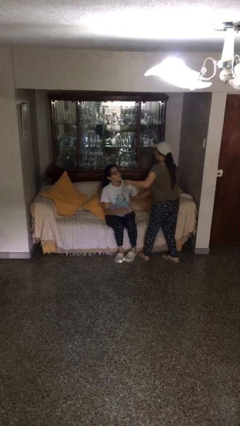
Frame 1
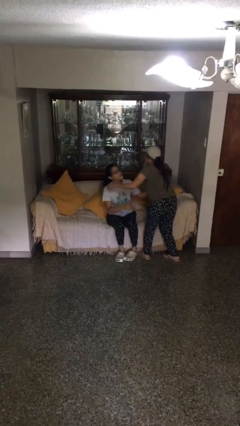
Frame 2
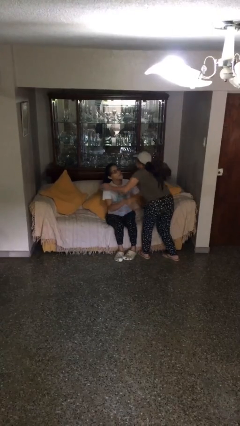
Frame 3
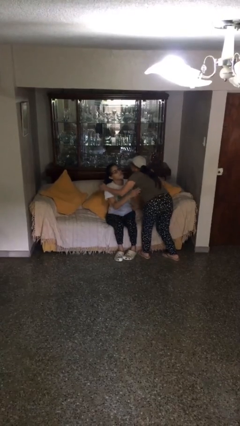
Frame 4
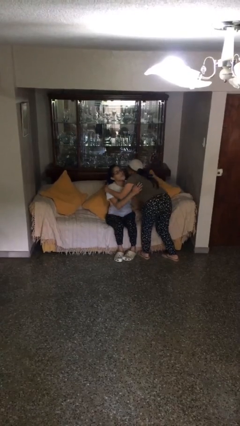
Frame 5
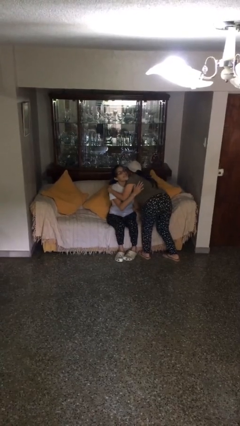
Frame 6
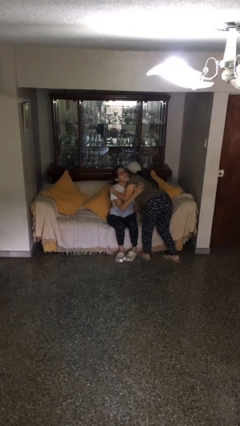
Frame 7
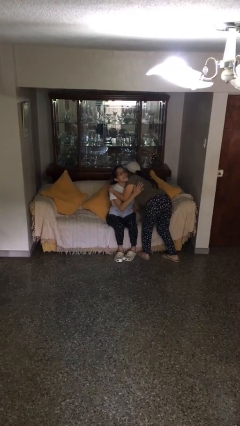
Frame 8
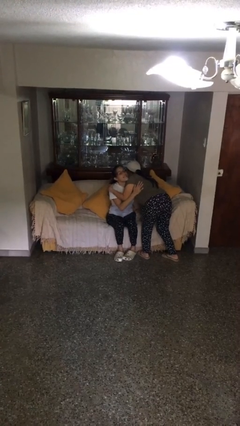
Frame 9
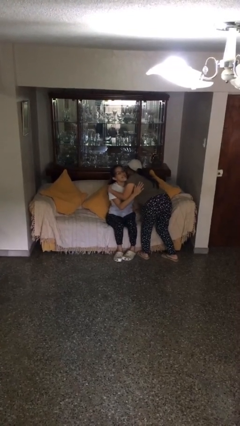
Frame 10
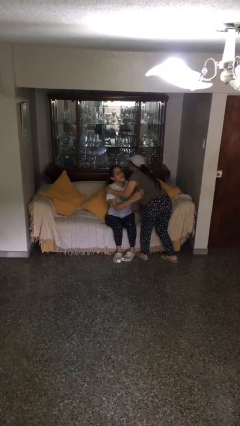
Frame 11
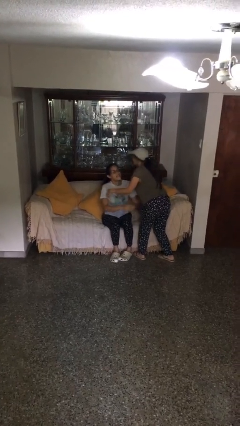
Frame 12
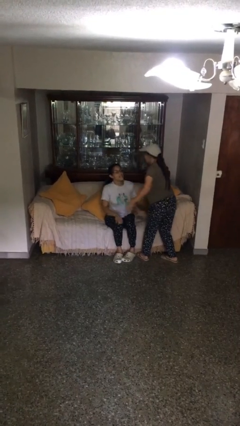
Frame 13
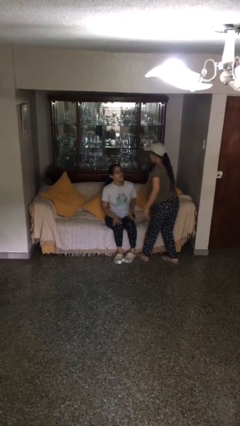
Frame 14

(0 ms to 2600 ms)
person embraces person

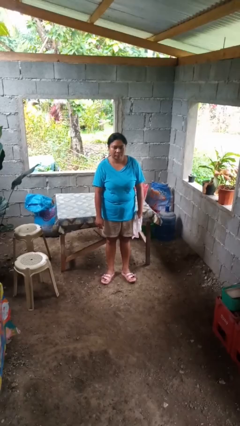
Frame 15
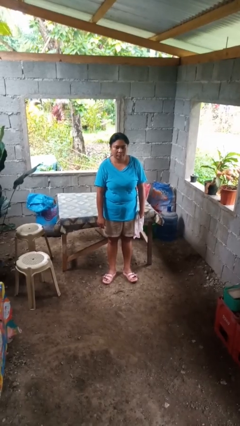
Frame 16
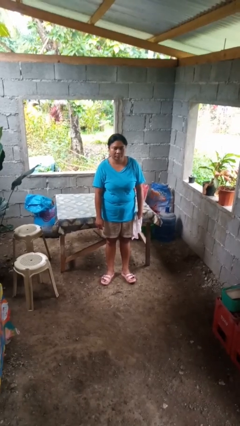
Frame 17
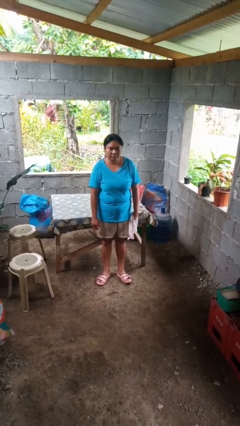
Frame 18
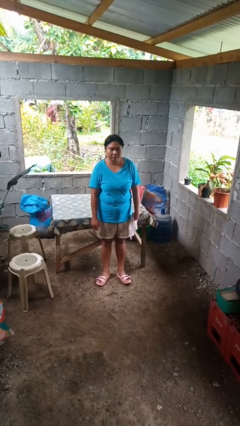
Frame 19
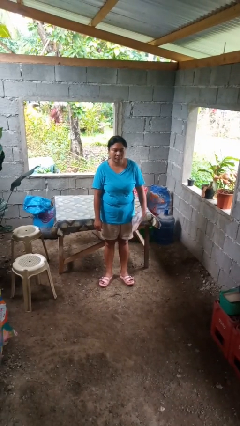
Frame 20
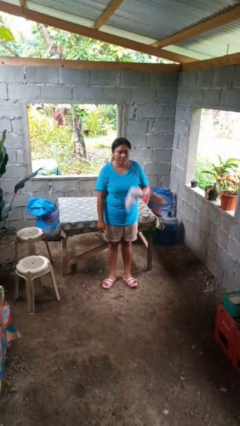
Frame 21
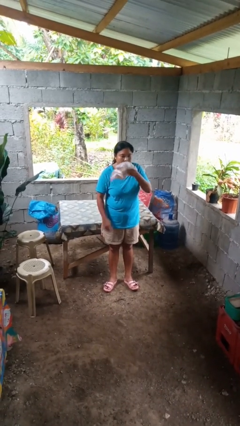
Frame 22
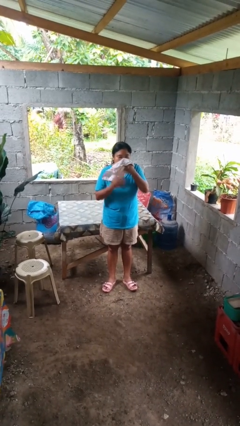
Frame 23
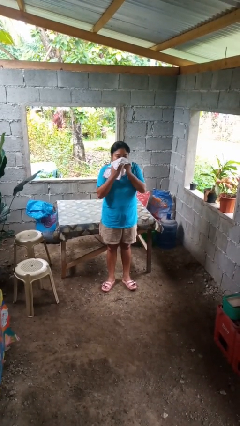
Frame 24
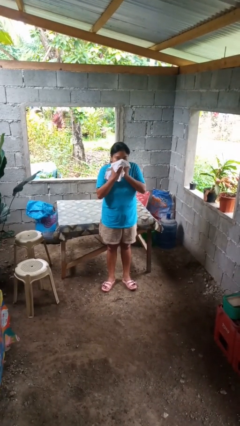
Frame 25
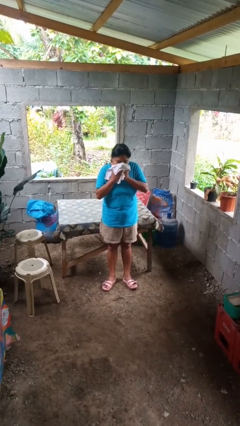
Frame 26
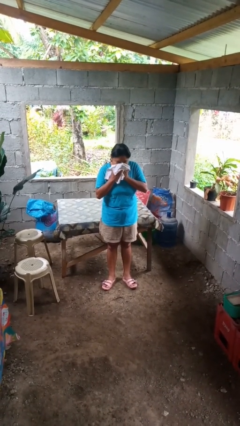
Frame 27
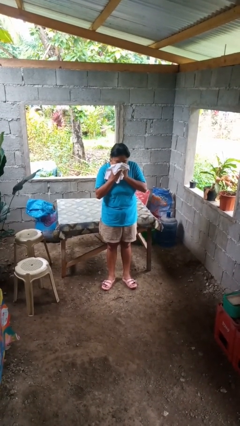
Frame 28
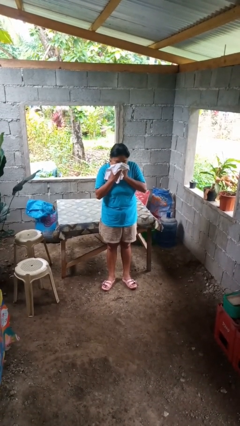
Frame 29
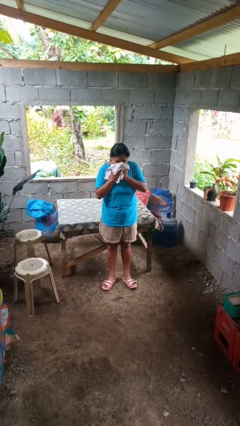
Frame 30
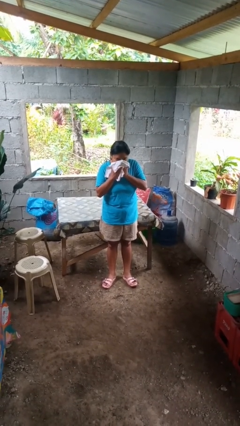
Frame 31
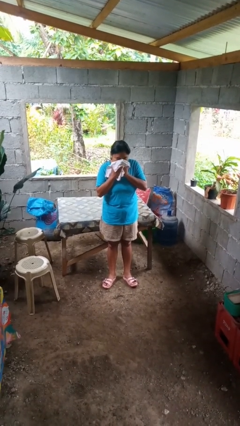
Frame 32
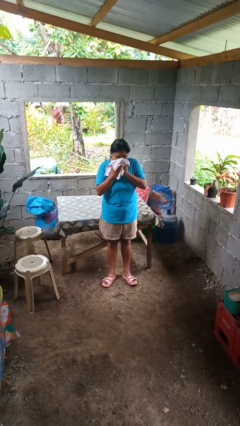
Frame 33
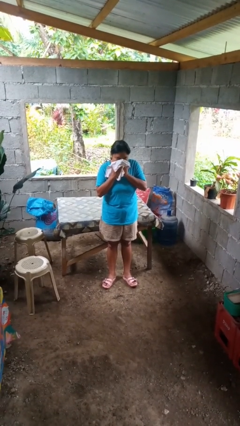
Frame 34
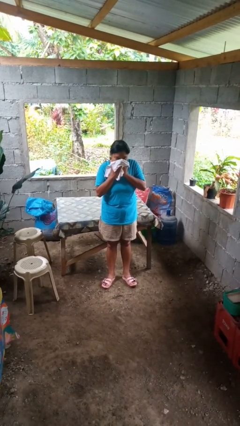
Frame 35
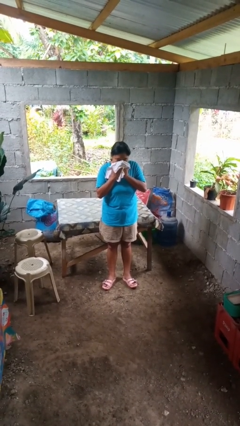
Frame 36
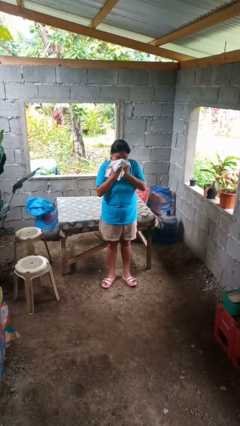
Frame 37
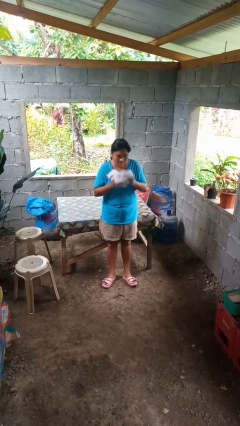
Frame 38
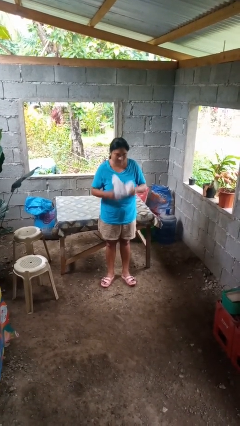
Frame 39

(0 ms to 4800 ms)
person blows nose

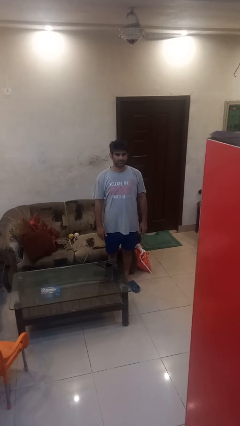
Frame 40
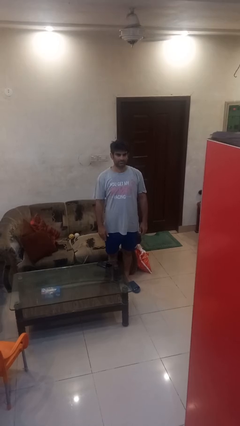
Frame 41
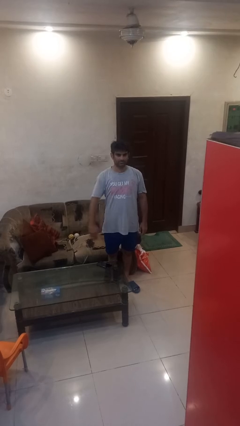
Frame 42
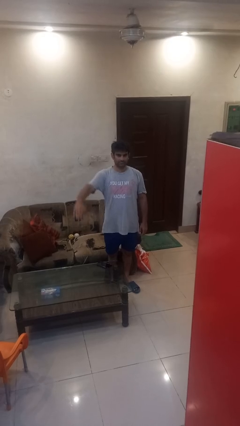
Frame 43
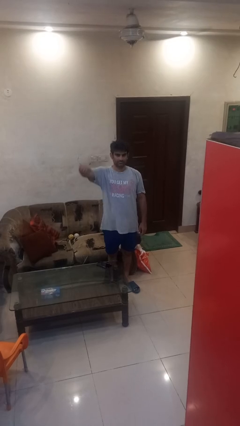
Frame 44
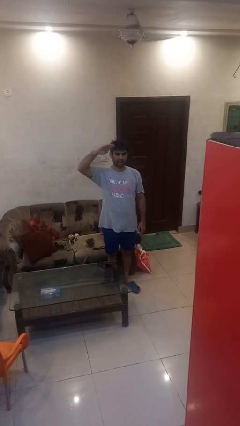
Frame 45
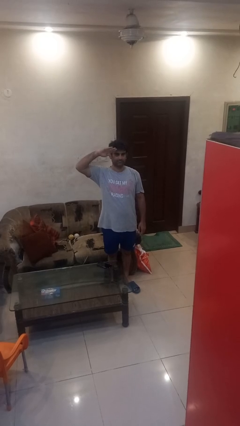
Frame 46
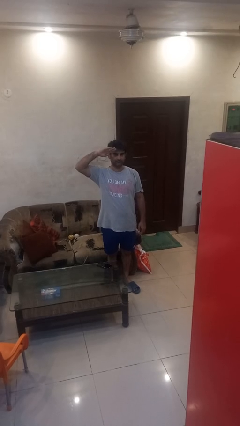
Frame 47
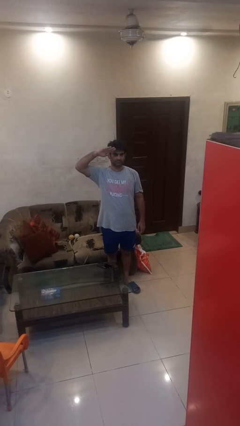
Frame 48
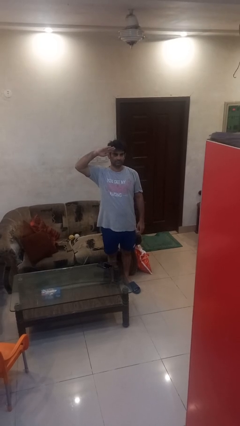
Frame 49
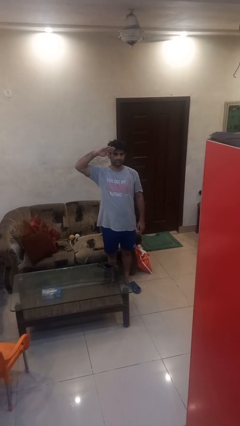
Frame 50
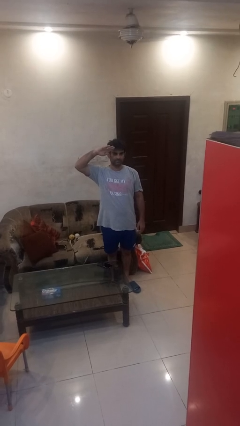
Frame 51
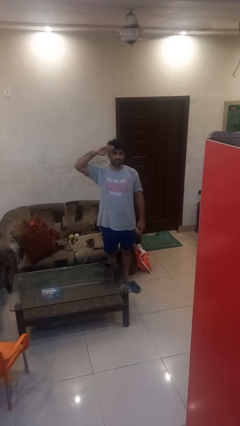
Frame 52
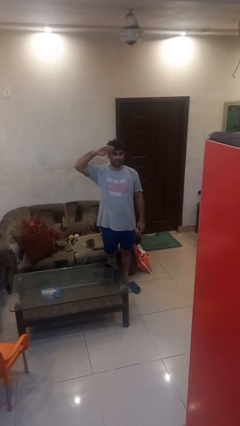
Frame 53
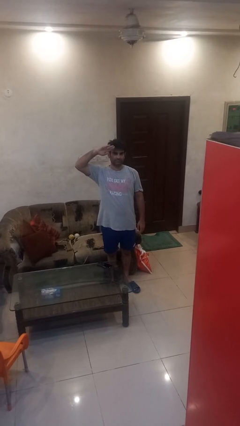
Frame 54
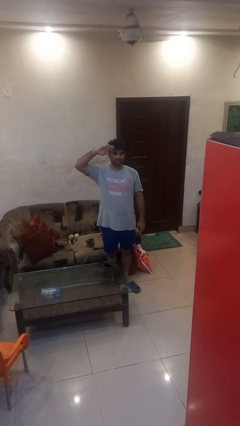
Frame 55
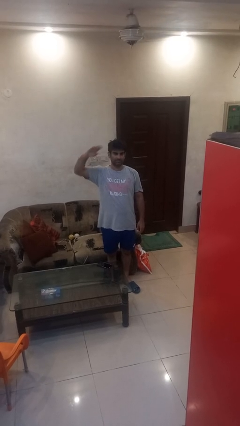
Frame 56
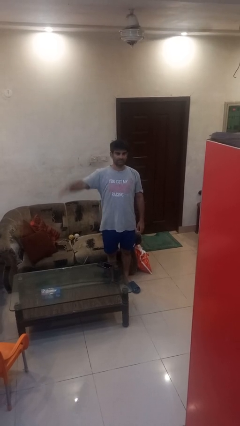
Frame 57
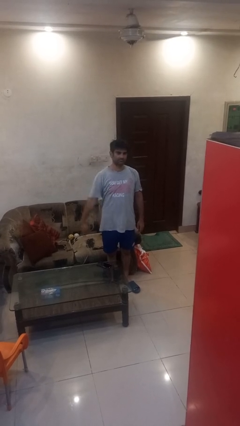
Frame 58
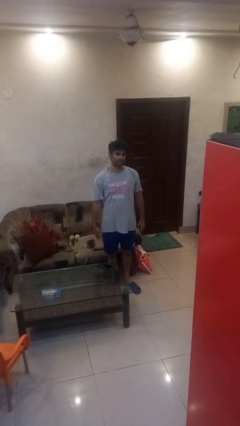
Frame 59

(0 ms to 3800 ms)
person salutes

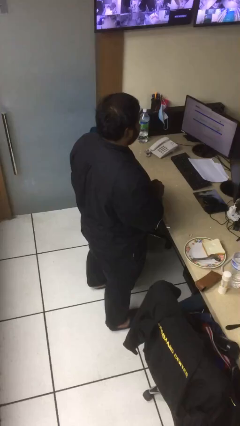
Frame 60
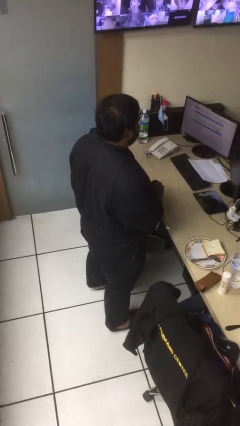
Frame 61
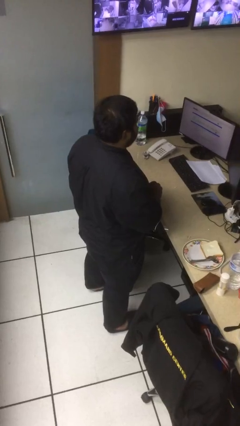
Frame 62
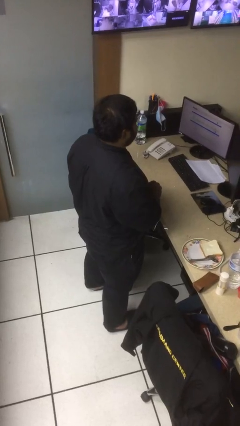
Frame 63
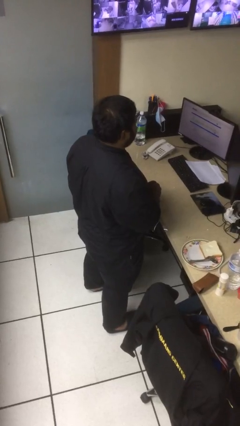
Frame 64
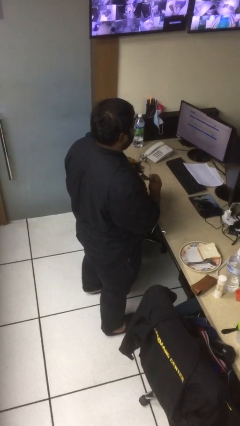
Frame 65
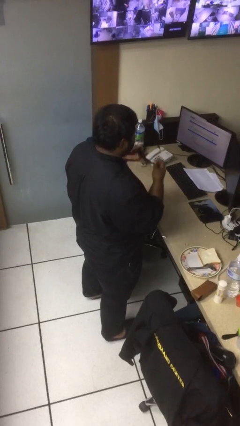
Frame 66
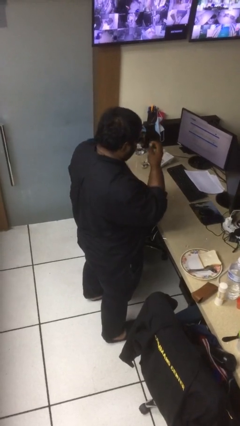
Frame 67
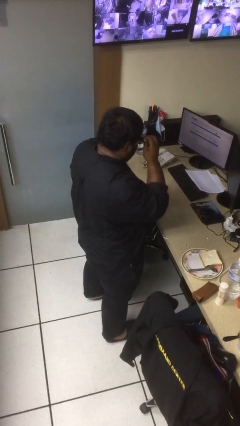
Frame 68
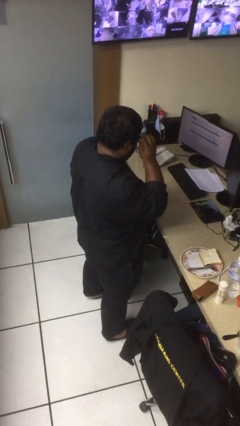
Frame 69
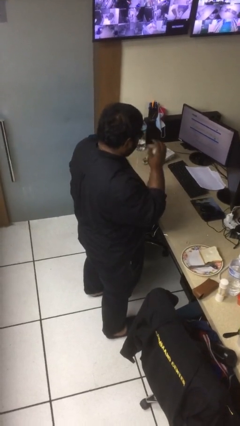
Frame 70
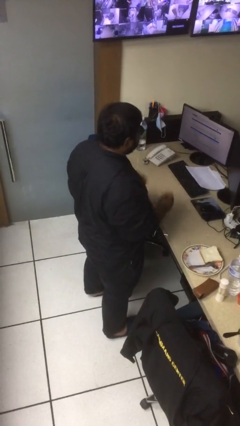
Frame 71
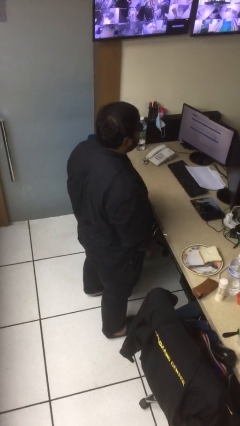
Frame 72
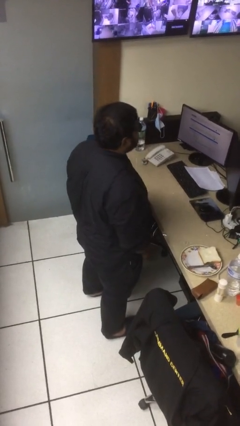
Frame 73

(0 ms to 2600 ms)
person puts on sunglasses

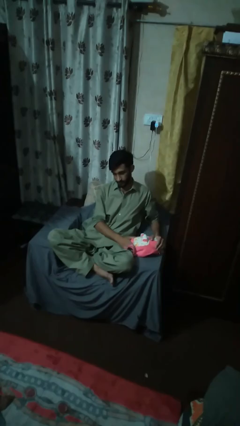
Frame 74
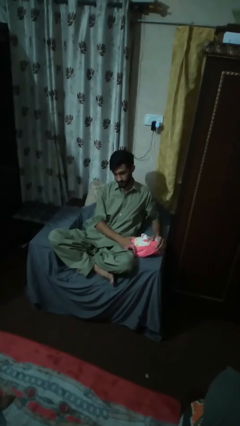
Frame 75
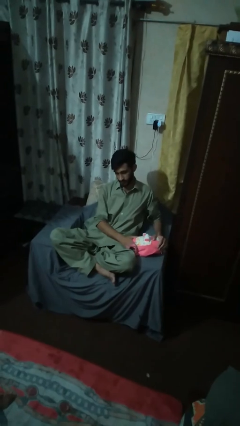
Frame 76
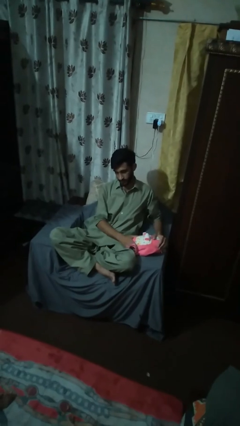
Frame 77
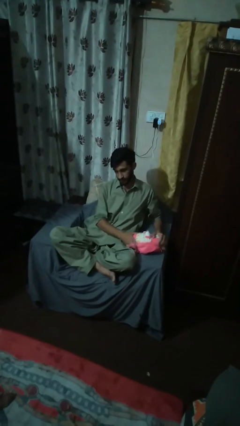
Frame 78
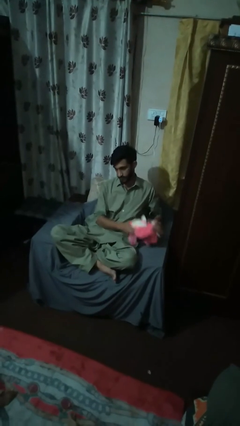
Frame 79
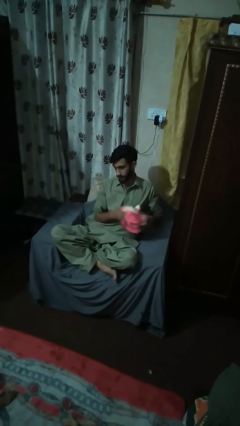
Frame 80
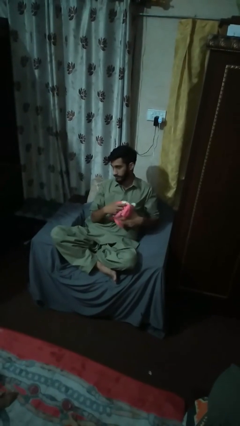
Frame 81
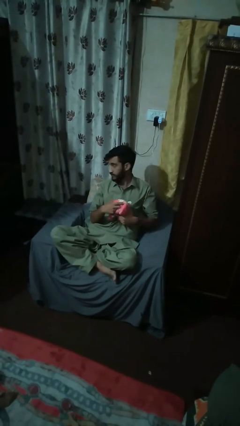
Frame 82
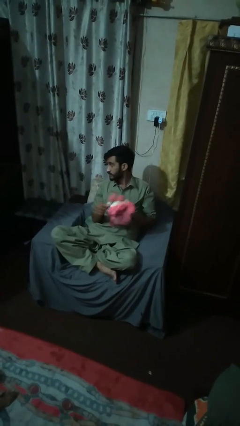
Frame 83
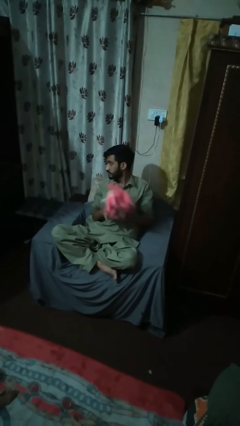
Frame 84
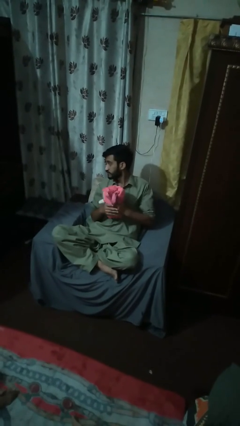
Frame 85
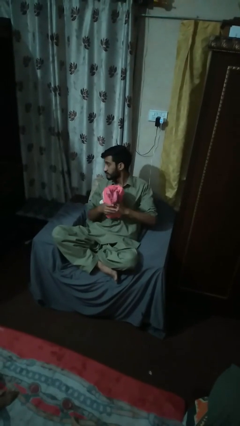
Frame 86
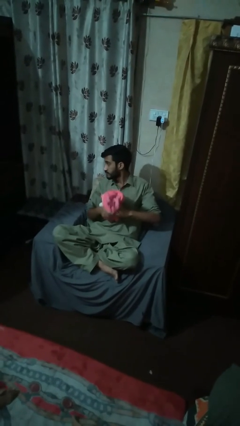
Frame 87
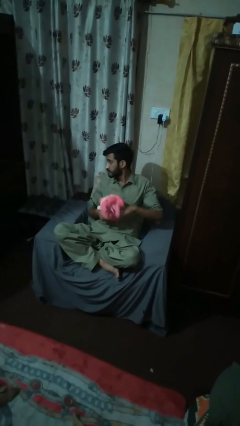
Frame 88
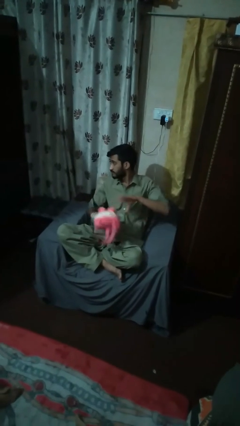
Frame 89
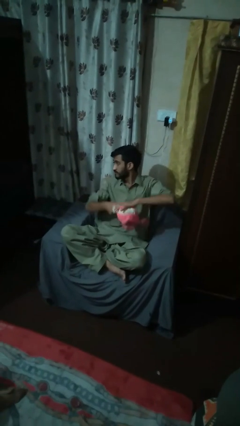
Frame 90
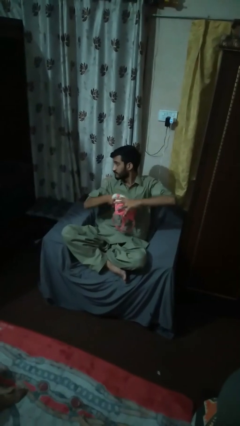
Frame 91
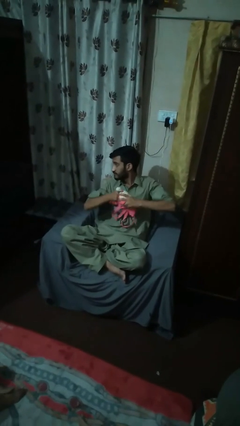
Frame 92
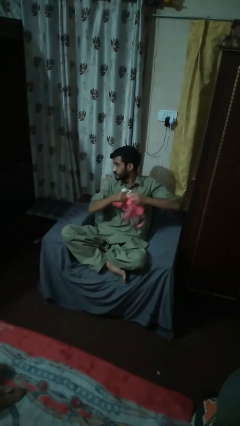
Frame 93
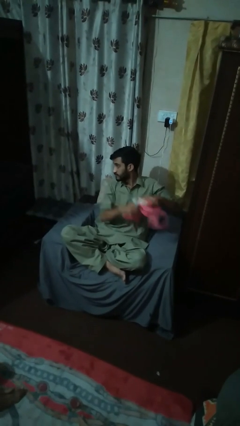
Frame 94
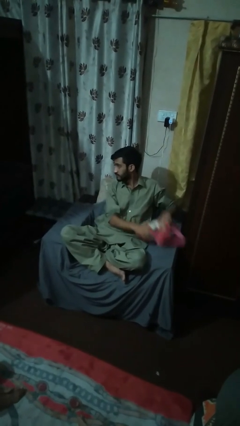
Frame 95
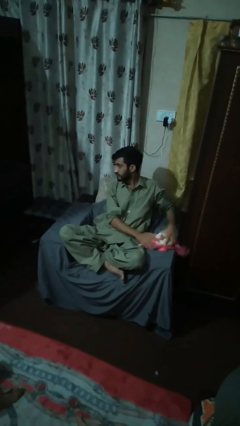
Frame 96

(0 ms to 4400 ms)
person squeezes object
